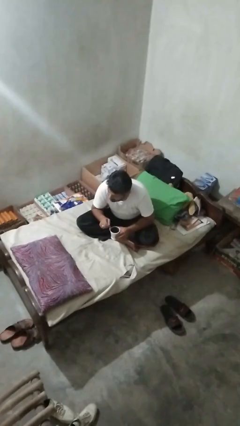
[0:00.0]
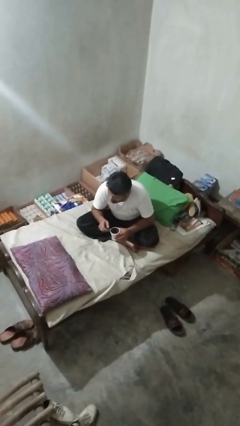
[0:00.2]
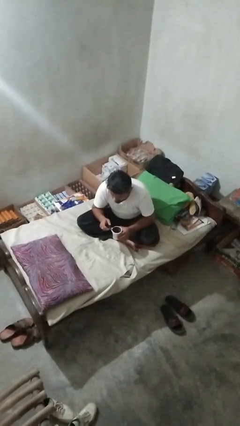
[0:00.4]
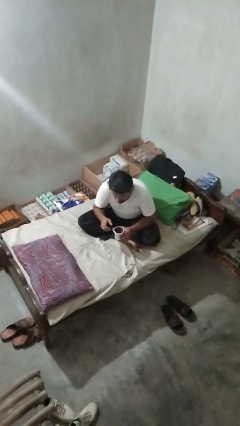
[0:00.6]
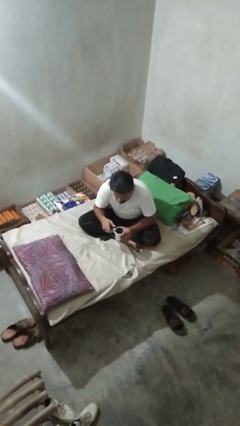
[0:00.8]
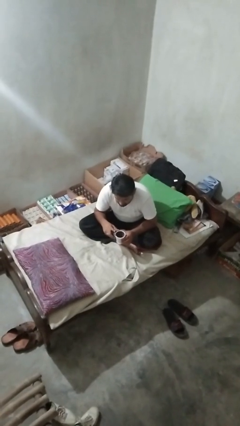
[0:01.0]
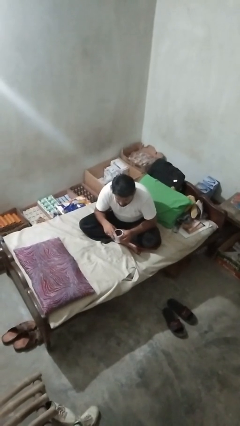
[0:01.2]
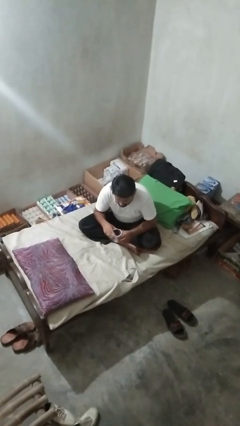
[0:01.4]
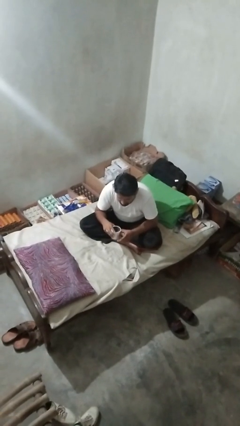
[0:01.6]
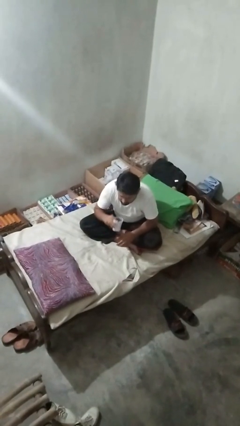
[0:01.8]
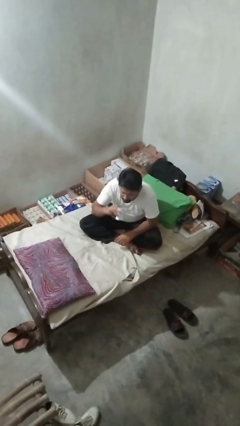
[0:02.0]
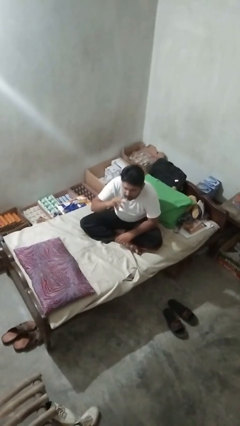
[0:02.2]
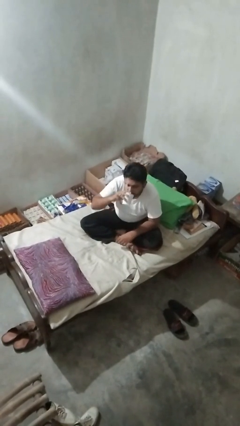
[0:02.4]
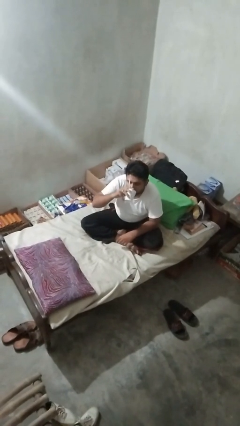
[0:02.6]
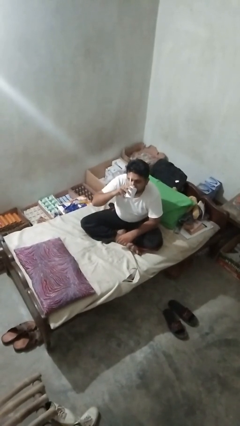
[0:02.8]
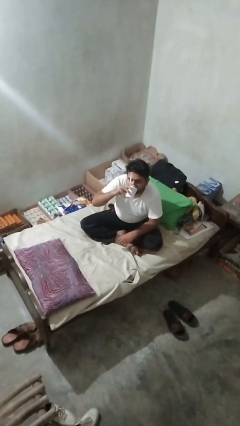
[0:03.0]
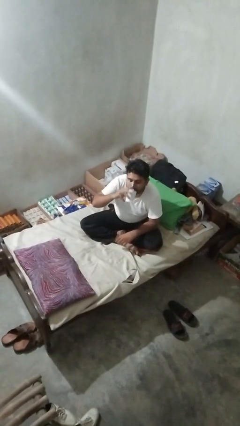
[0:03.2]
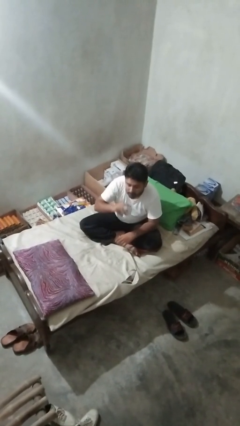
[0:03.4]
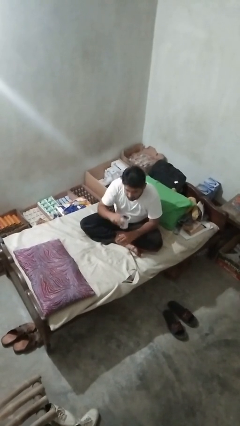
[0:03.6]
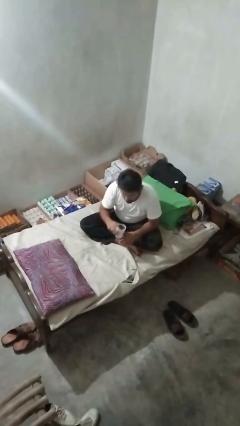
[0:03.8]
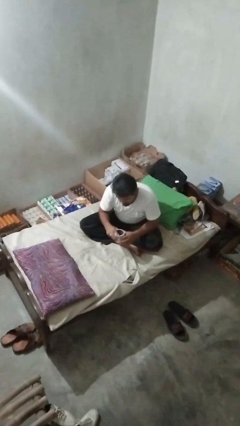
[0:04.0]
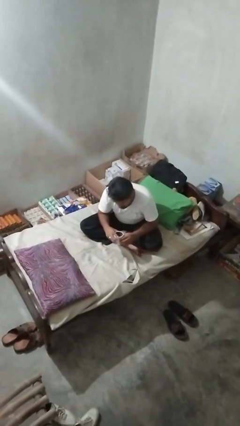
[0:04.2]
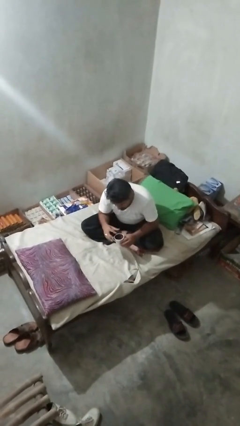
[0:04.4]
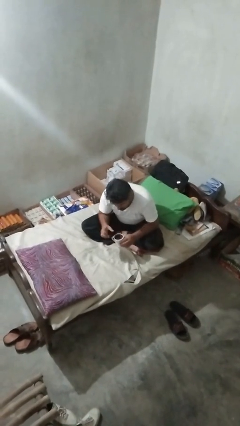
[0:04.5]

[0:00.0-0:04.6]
person drinks from mug

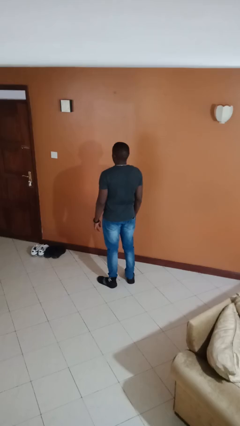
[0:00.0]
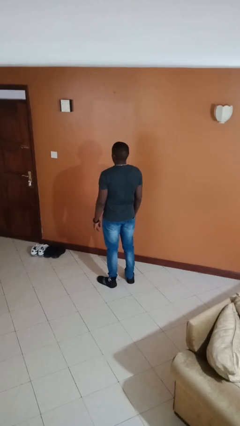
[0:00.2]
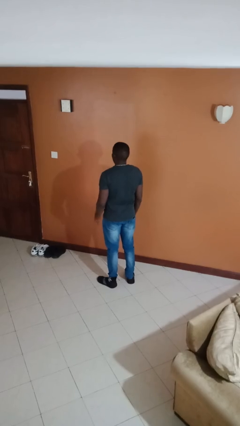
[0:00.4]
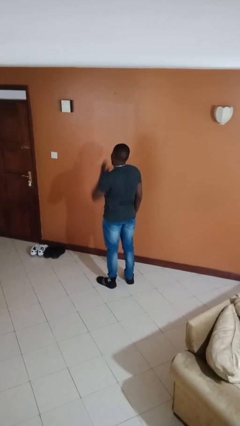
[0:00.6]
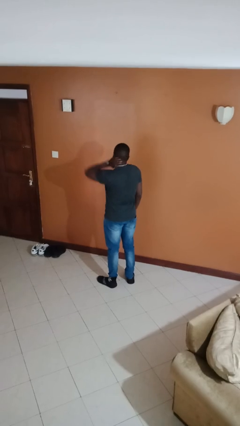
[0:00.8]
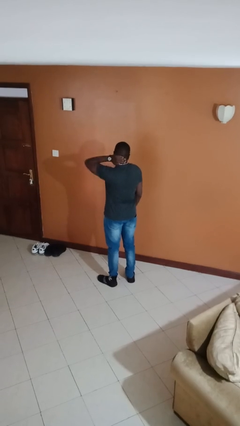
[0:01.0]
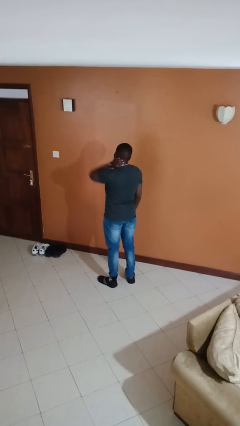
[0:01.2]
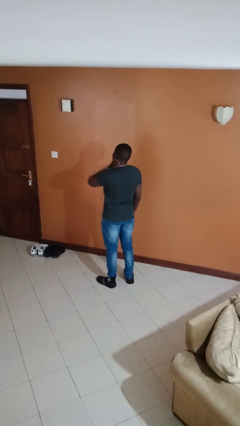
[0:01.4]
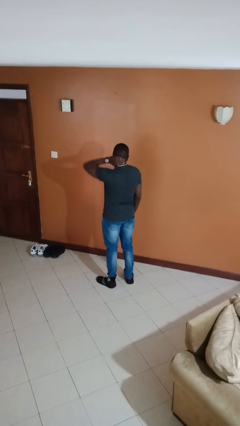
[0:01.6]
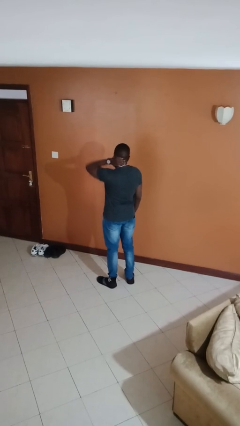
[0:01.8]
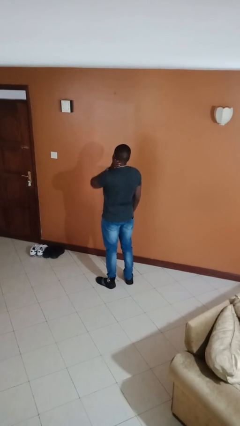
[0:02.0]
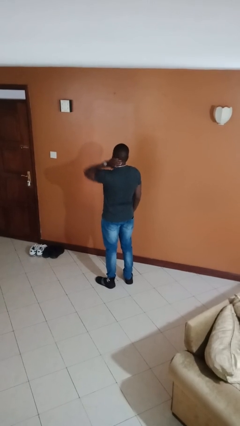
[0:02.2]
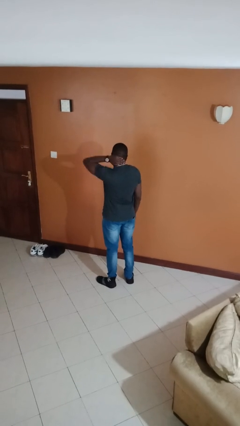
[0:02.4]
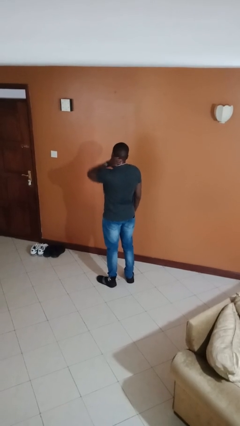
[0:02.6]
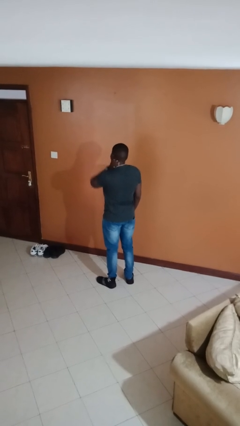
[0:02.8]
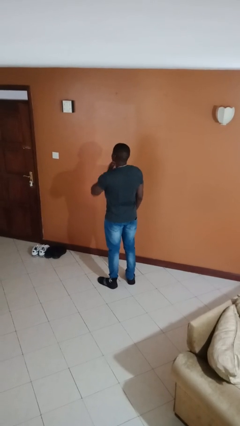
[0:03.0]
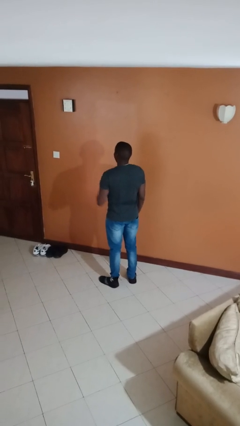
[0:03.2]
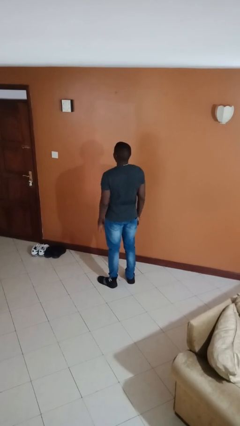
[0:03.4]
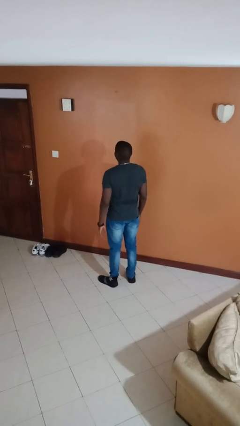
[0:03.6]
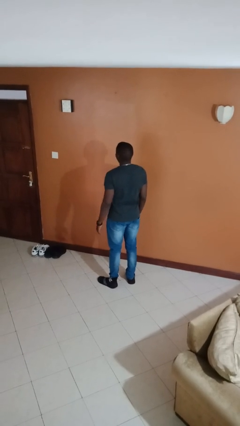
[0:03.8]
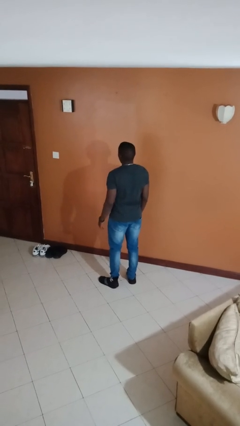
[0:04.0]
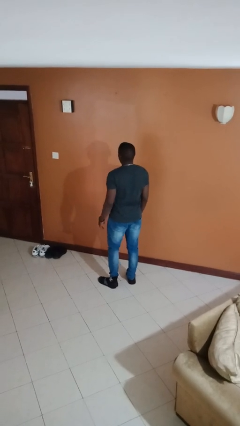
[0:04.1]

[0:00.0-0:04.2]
person rubs neck

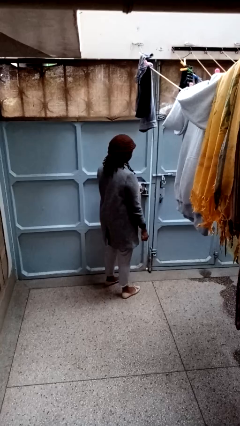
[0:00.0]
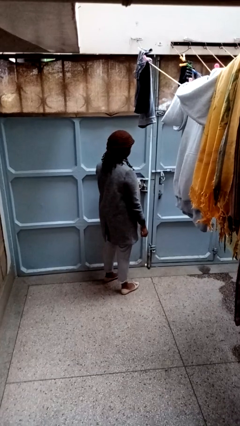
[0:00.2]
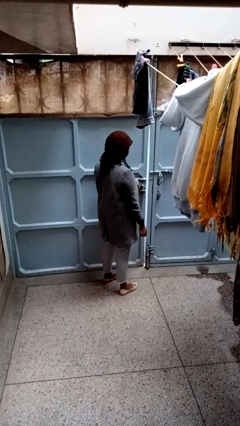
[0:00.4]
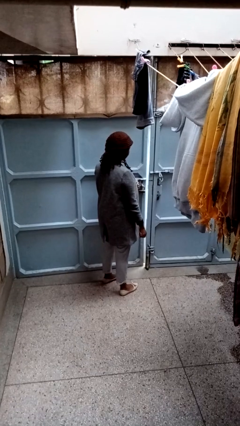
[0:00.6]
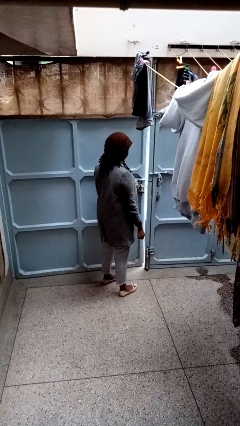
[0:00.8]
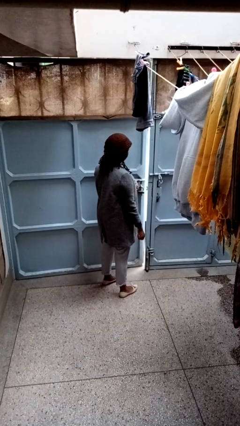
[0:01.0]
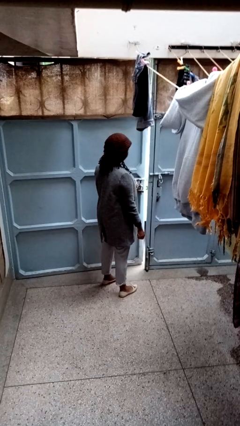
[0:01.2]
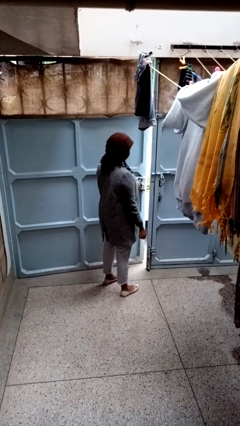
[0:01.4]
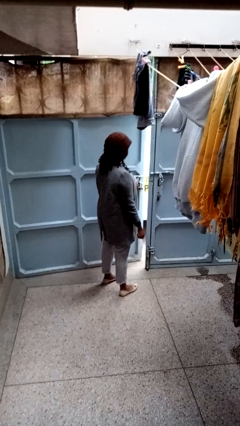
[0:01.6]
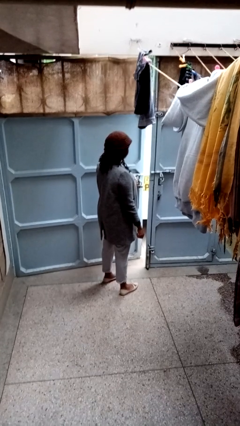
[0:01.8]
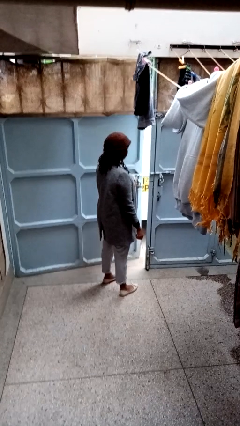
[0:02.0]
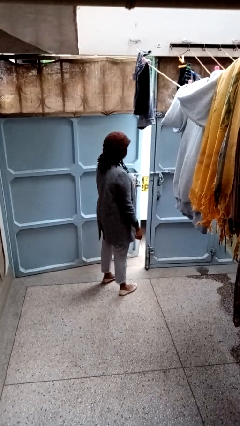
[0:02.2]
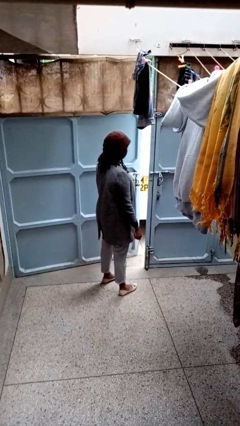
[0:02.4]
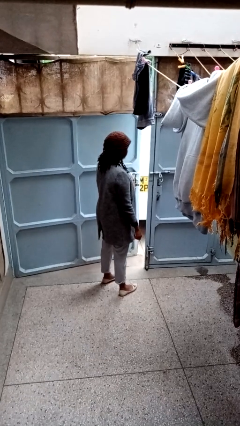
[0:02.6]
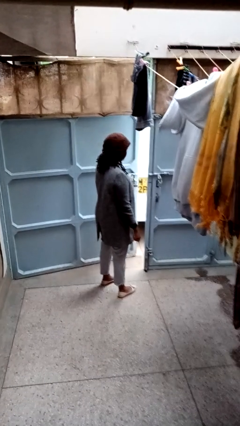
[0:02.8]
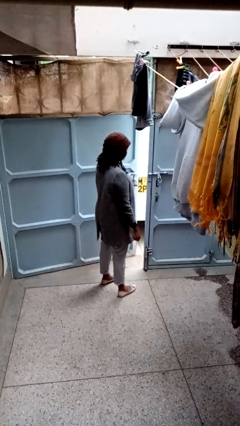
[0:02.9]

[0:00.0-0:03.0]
person opens gate

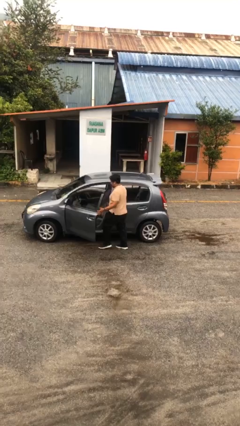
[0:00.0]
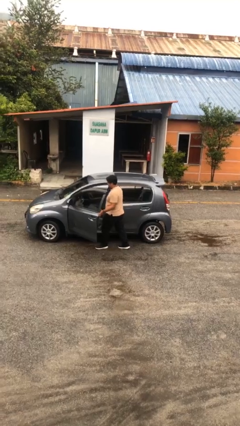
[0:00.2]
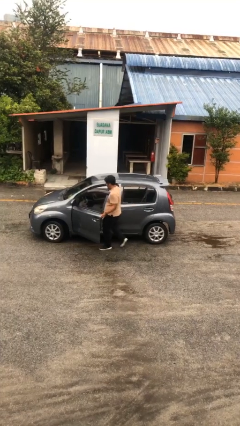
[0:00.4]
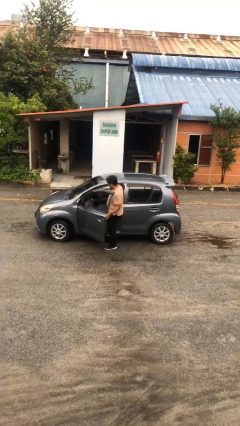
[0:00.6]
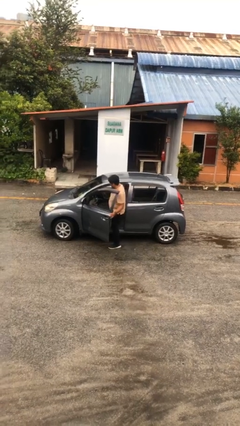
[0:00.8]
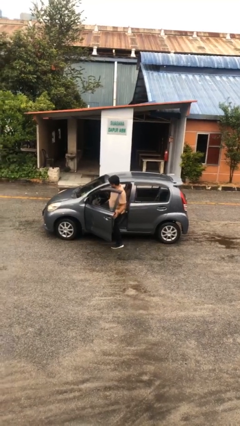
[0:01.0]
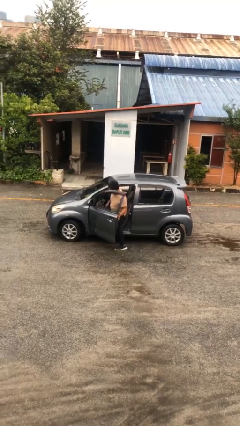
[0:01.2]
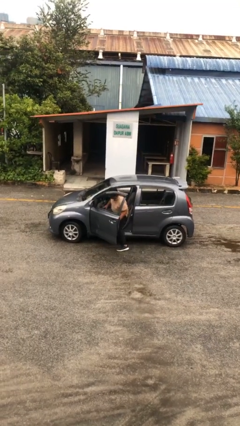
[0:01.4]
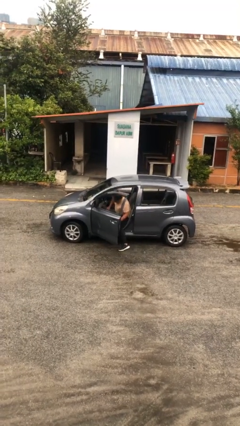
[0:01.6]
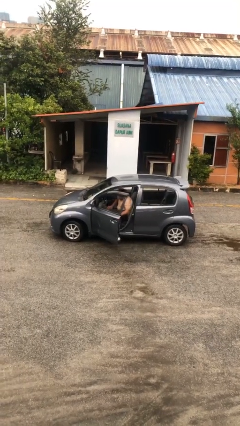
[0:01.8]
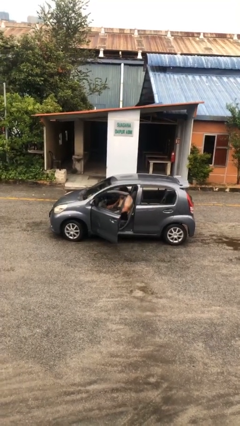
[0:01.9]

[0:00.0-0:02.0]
person enters car

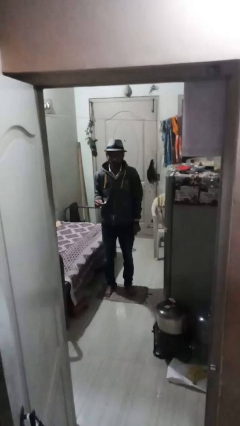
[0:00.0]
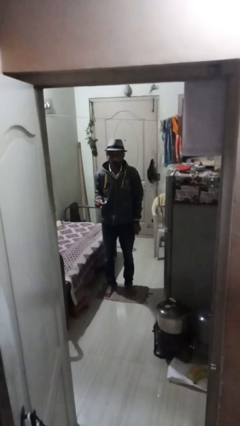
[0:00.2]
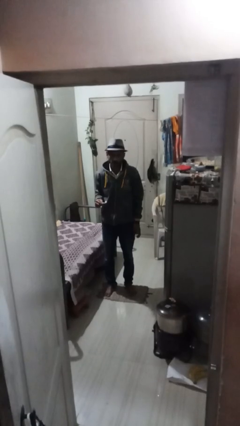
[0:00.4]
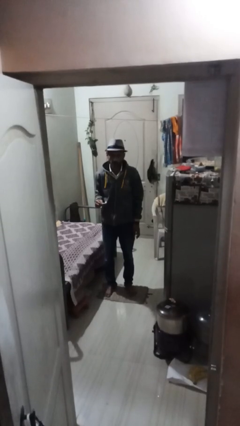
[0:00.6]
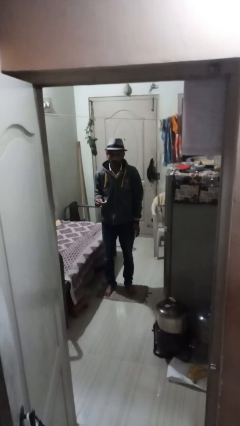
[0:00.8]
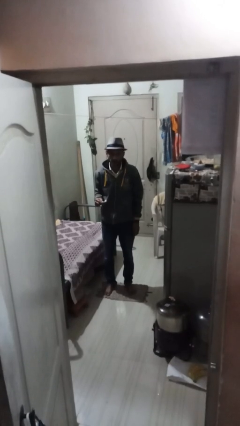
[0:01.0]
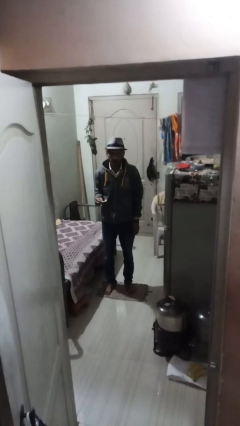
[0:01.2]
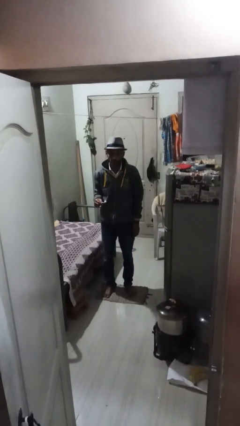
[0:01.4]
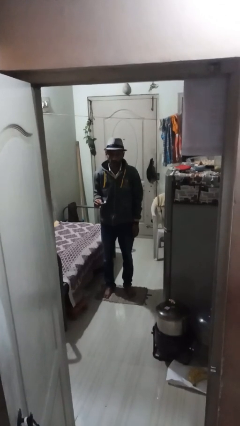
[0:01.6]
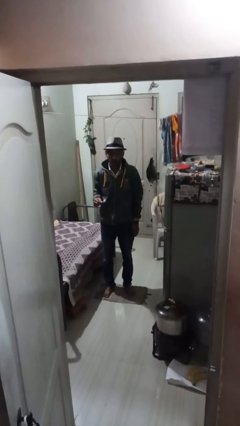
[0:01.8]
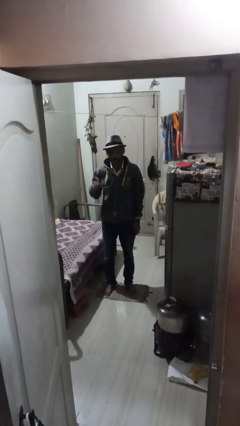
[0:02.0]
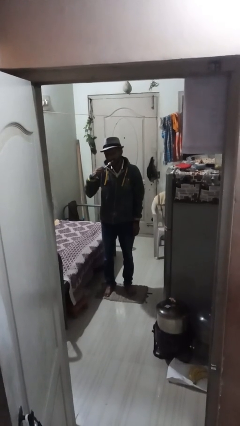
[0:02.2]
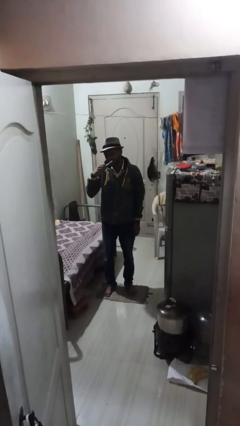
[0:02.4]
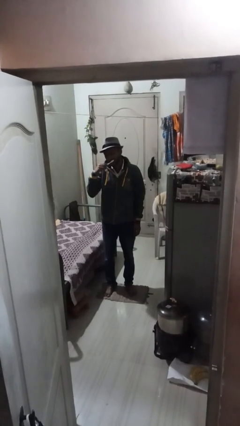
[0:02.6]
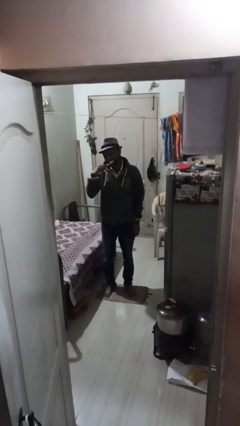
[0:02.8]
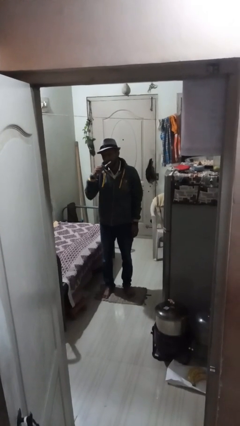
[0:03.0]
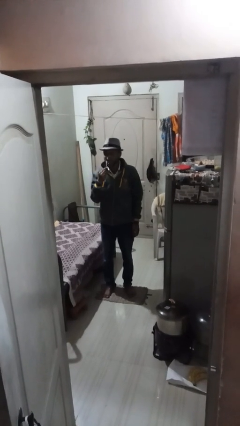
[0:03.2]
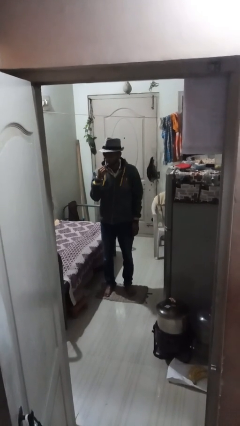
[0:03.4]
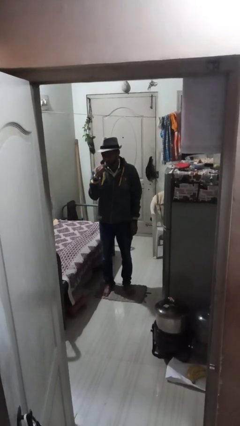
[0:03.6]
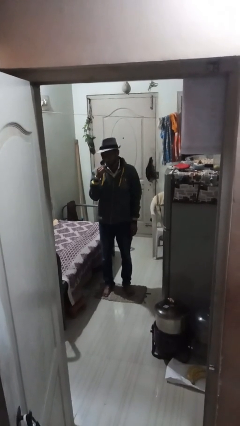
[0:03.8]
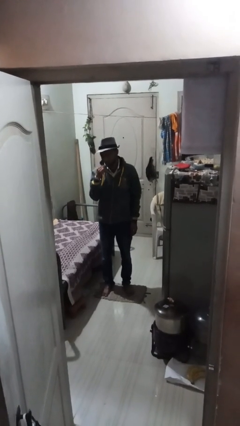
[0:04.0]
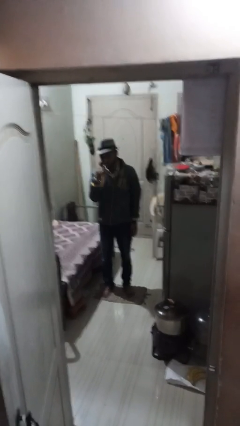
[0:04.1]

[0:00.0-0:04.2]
person brushes teeth
